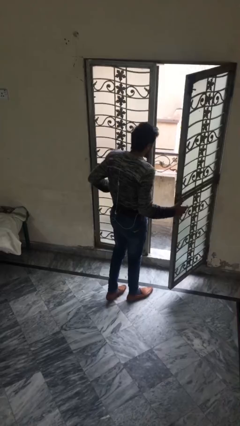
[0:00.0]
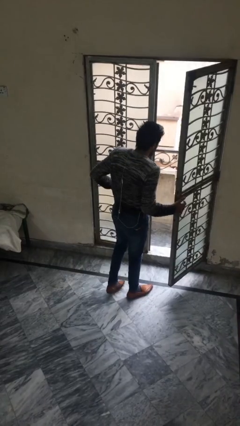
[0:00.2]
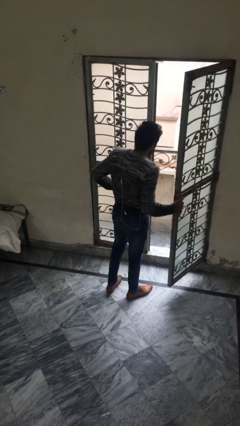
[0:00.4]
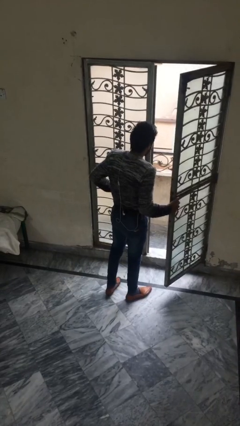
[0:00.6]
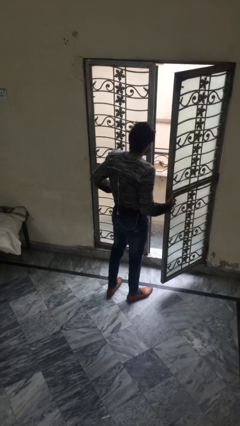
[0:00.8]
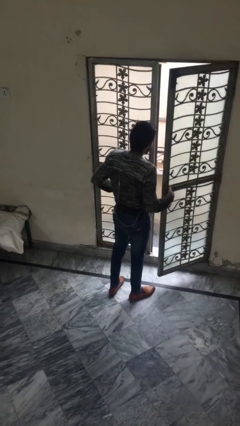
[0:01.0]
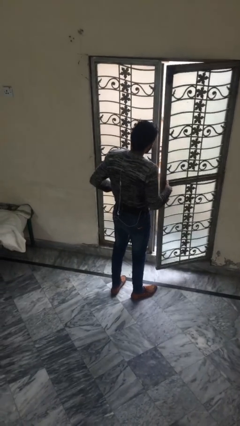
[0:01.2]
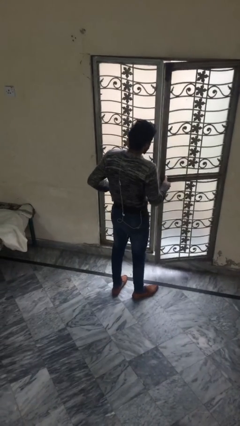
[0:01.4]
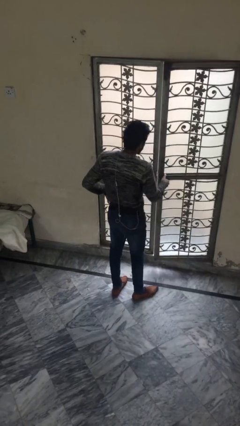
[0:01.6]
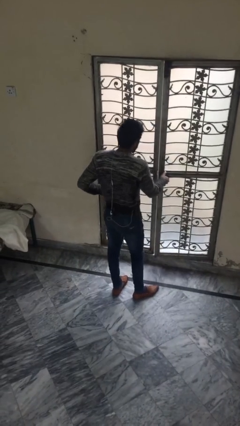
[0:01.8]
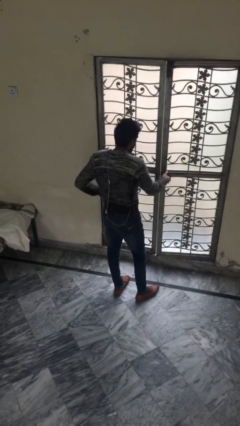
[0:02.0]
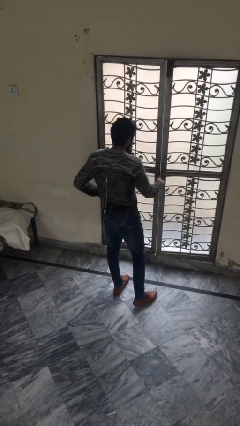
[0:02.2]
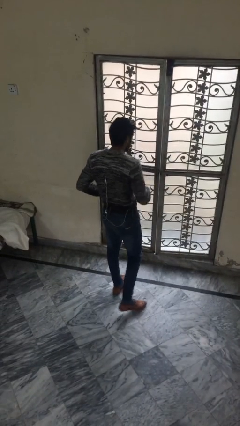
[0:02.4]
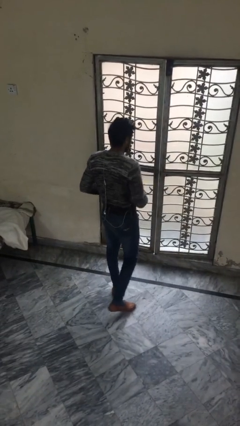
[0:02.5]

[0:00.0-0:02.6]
person closes facility door

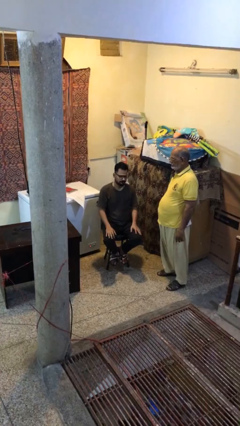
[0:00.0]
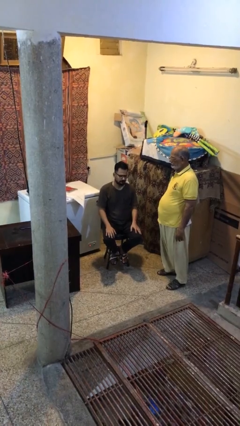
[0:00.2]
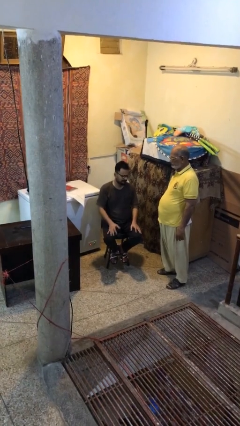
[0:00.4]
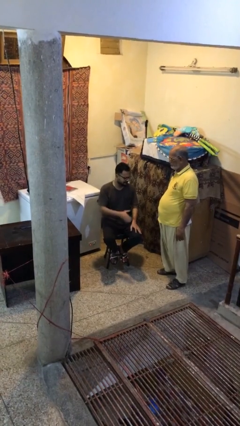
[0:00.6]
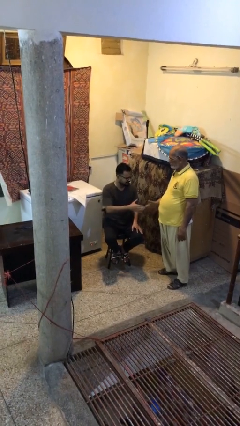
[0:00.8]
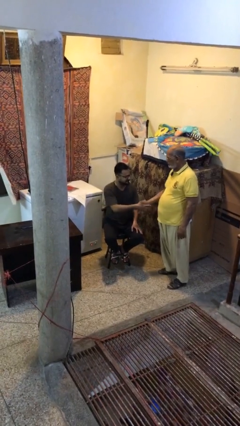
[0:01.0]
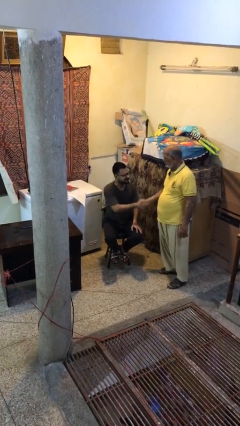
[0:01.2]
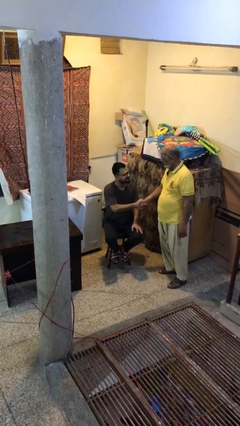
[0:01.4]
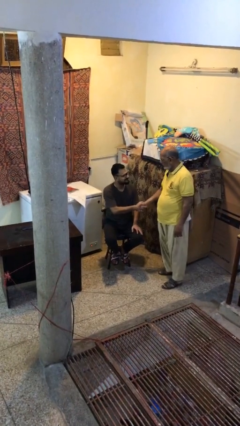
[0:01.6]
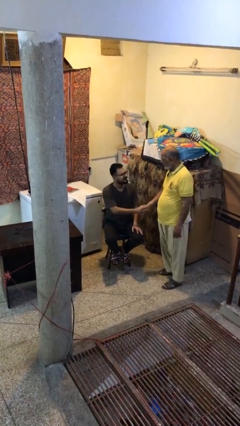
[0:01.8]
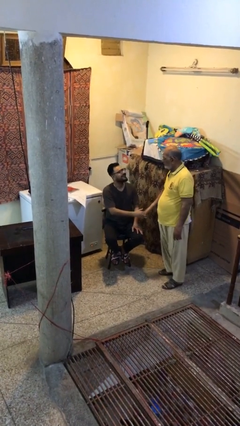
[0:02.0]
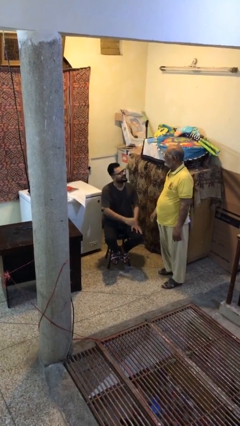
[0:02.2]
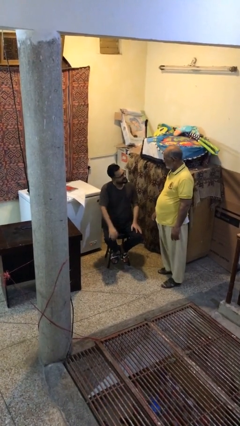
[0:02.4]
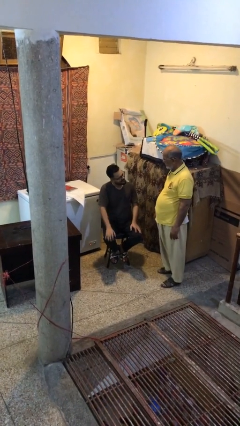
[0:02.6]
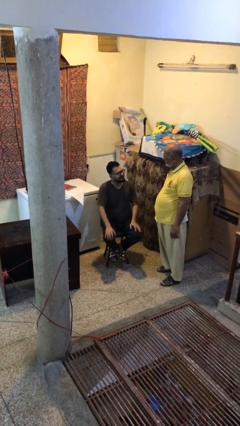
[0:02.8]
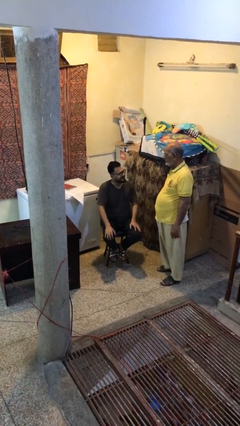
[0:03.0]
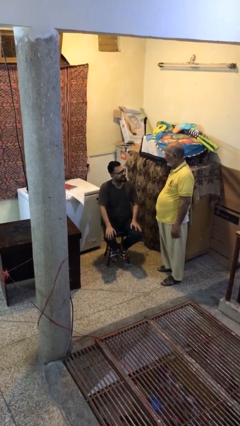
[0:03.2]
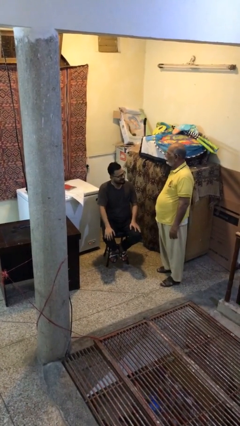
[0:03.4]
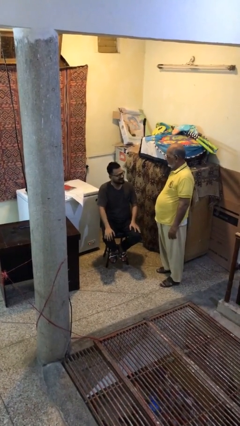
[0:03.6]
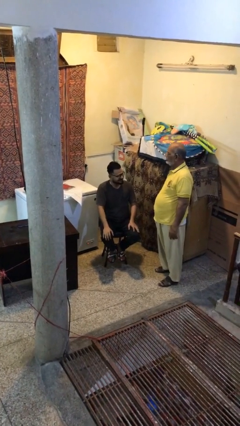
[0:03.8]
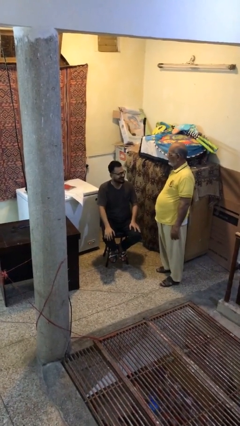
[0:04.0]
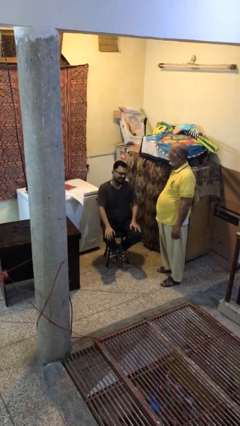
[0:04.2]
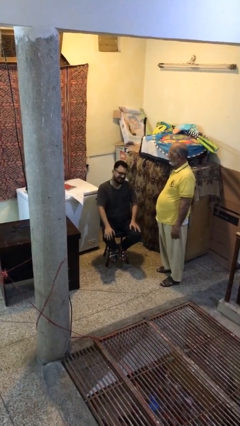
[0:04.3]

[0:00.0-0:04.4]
person shakes hand

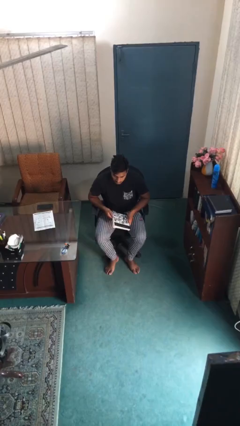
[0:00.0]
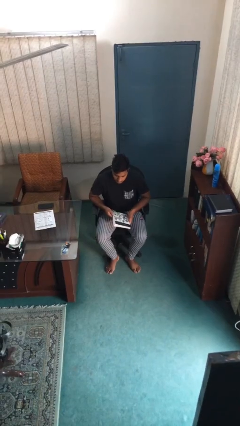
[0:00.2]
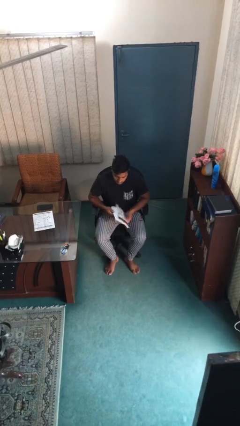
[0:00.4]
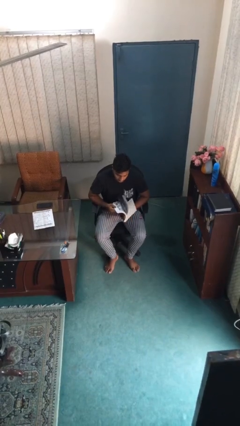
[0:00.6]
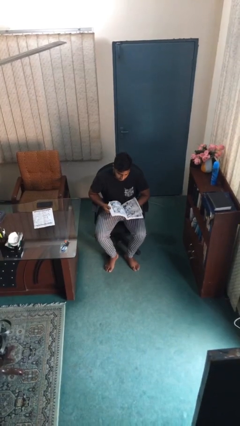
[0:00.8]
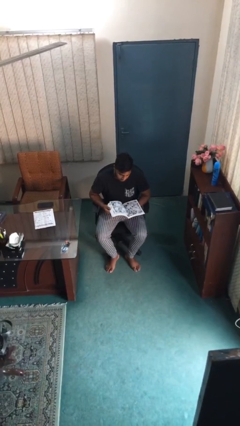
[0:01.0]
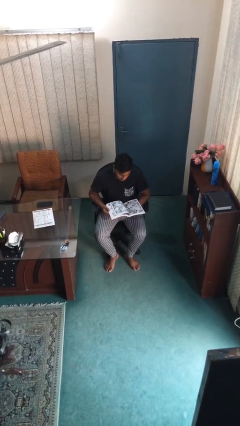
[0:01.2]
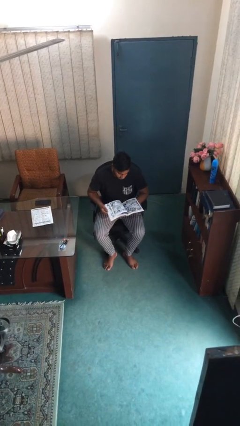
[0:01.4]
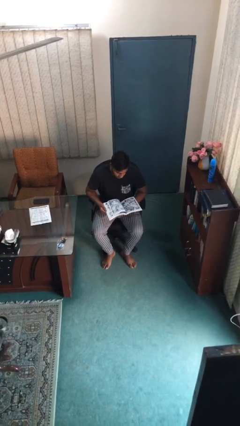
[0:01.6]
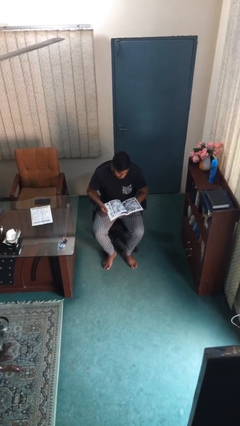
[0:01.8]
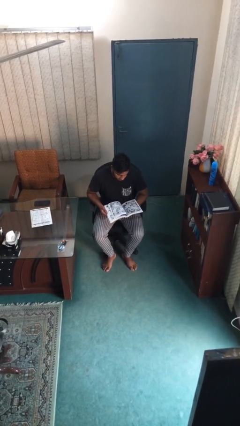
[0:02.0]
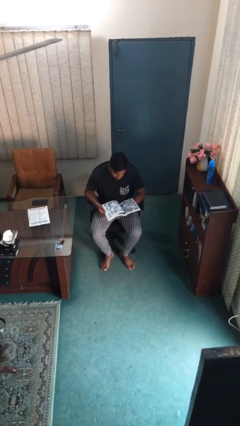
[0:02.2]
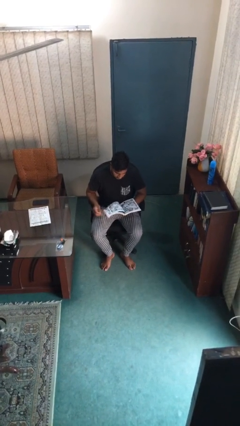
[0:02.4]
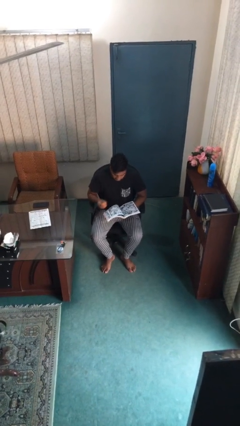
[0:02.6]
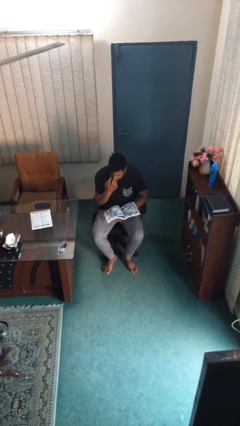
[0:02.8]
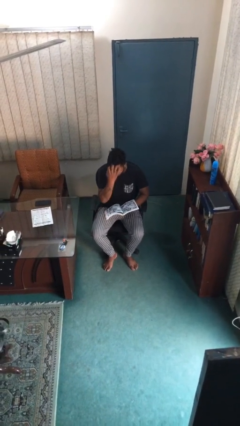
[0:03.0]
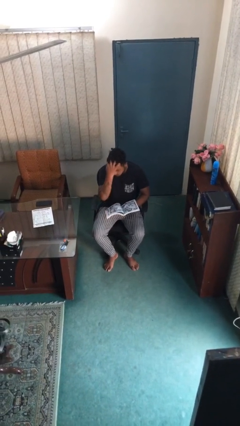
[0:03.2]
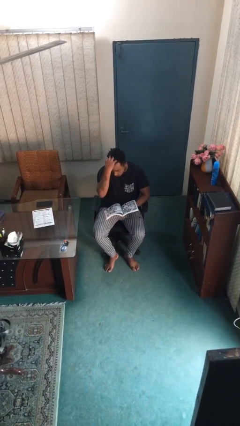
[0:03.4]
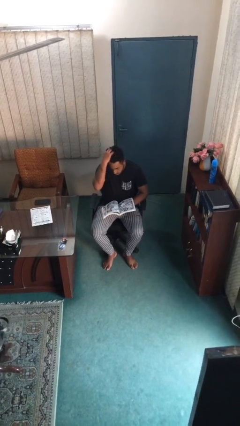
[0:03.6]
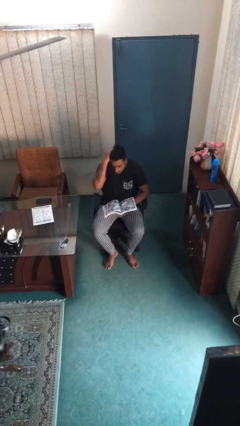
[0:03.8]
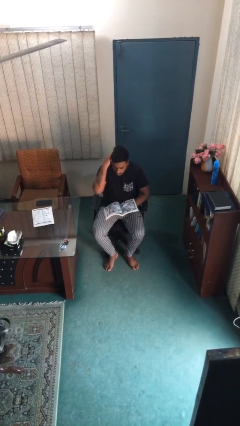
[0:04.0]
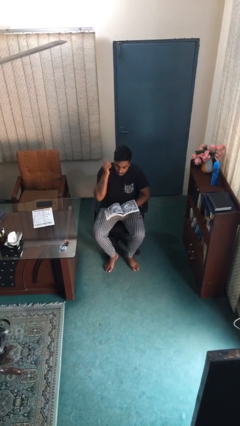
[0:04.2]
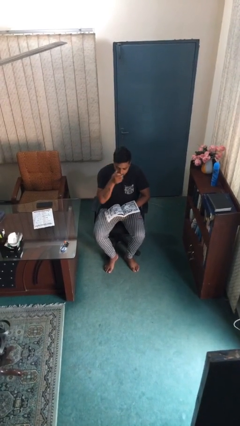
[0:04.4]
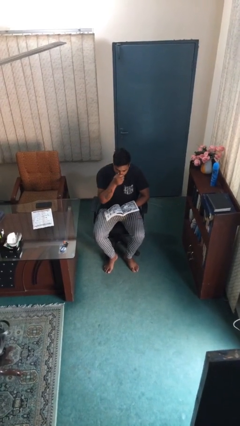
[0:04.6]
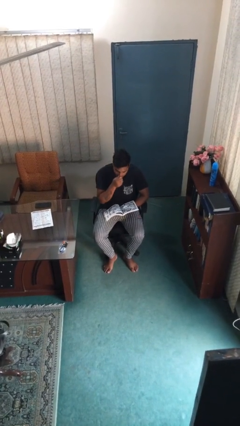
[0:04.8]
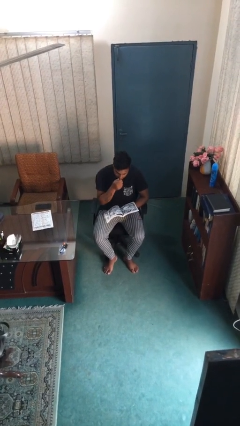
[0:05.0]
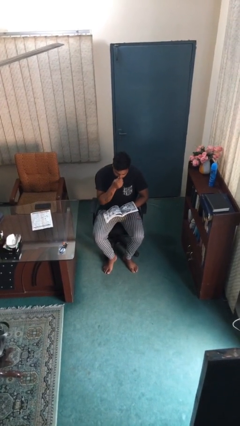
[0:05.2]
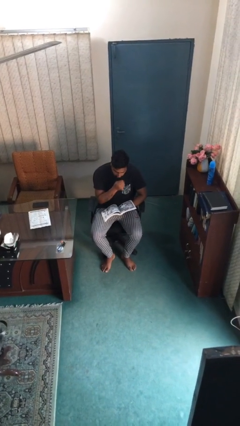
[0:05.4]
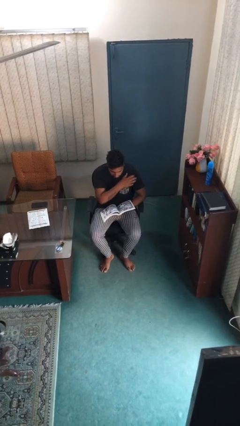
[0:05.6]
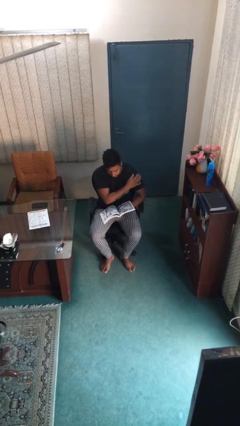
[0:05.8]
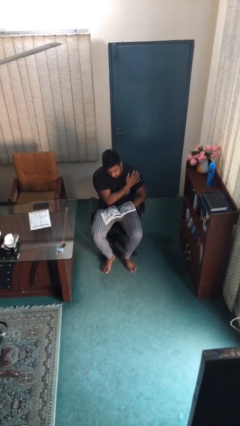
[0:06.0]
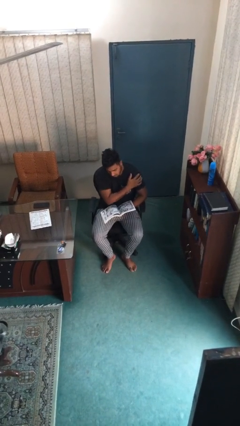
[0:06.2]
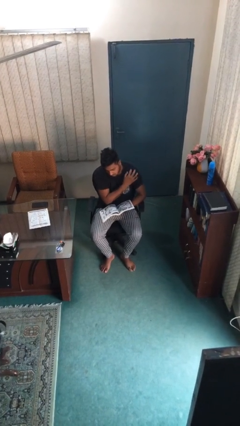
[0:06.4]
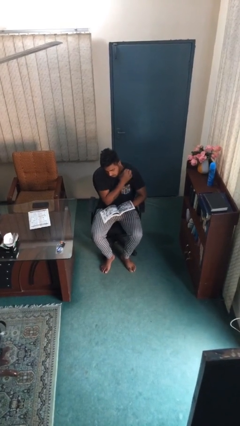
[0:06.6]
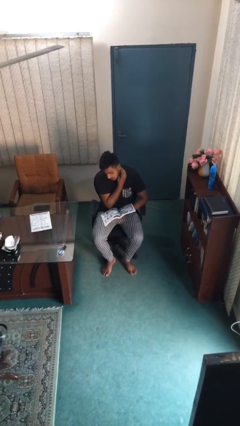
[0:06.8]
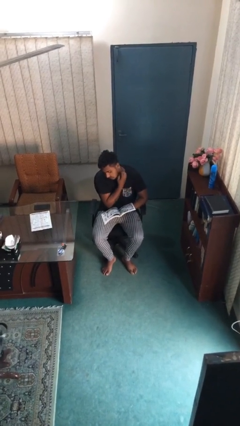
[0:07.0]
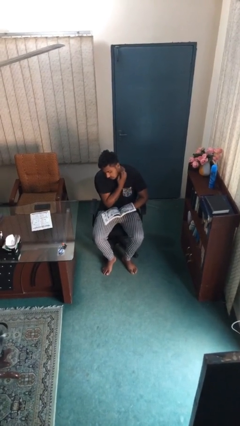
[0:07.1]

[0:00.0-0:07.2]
person reads document

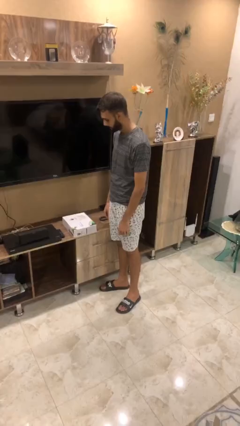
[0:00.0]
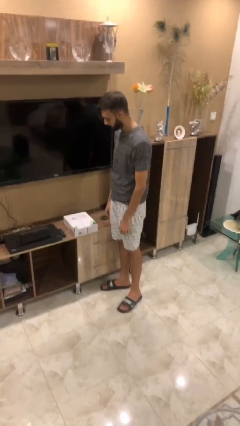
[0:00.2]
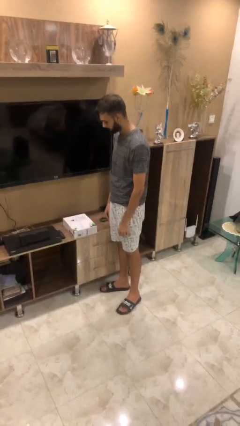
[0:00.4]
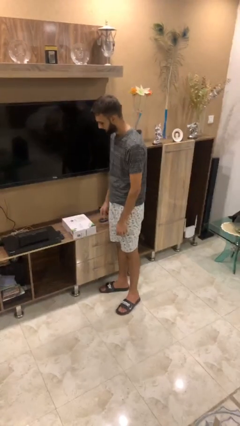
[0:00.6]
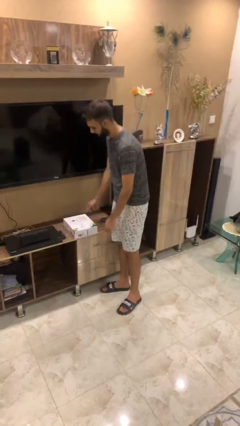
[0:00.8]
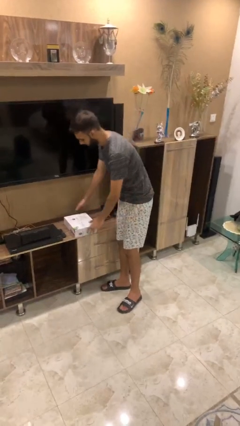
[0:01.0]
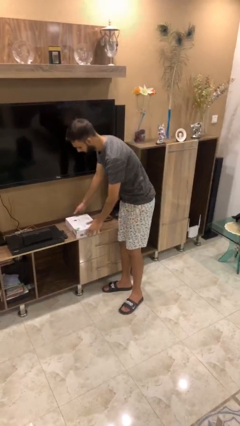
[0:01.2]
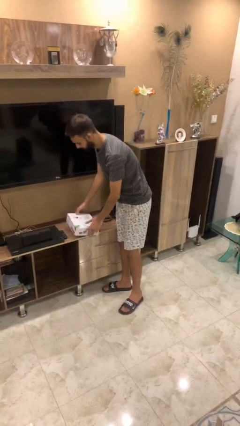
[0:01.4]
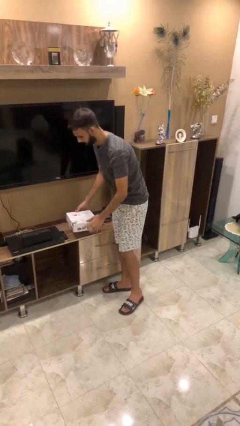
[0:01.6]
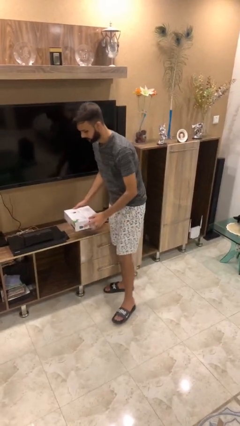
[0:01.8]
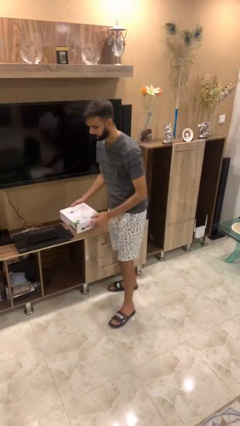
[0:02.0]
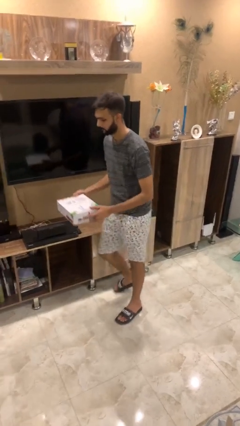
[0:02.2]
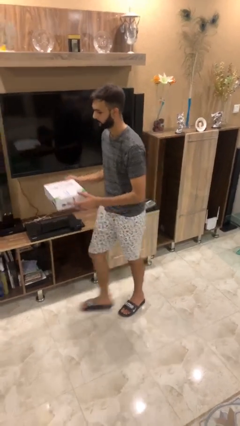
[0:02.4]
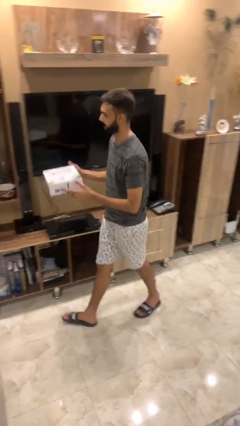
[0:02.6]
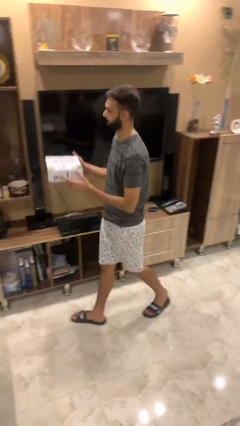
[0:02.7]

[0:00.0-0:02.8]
person picks up object from table

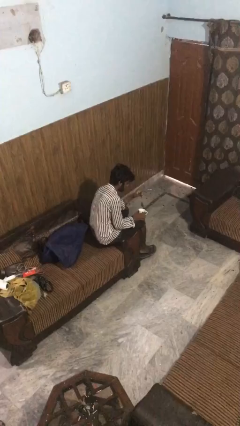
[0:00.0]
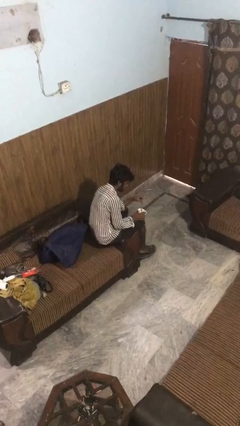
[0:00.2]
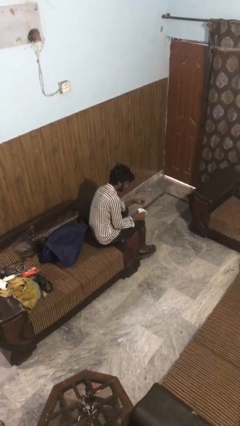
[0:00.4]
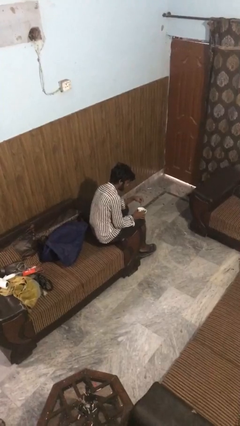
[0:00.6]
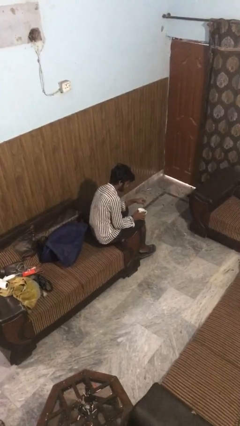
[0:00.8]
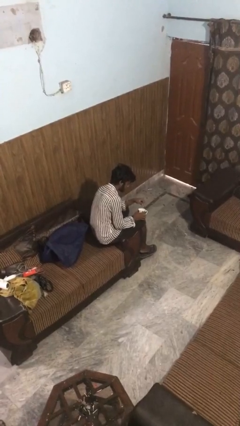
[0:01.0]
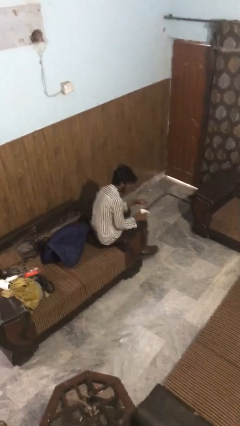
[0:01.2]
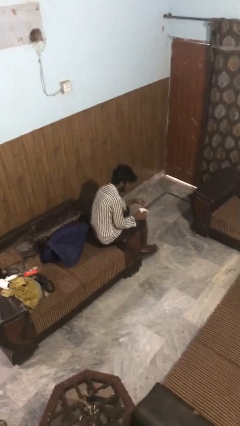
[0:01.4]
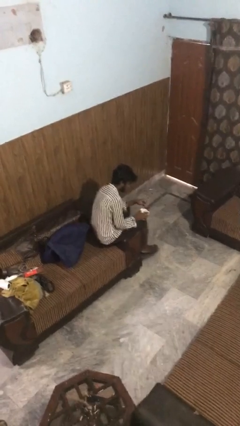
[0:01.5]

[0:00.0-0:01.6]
person stirs mug
